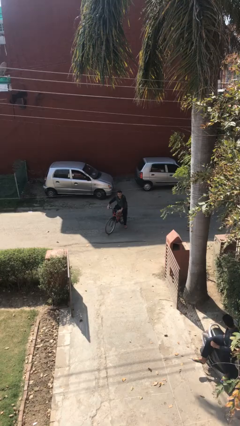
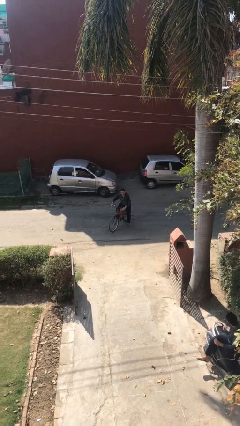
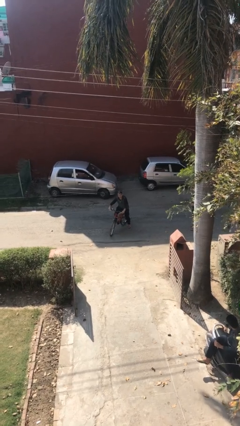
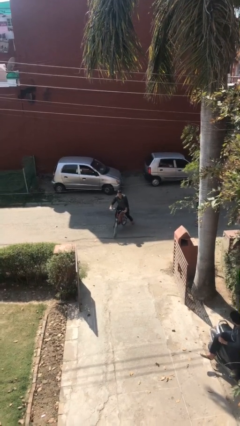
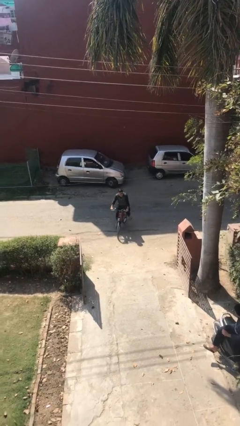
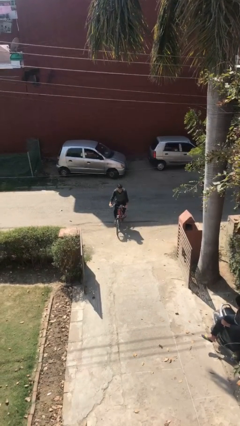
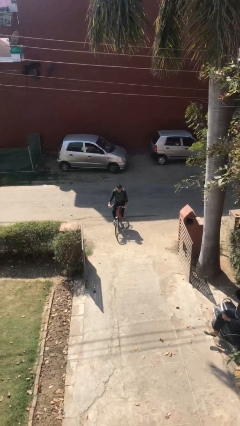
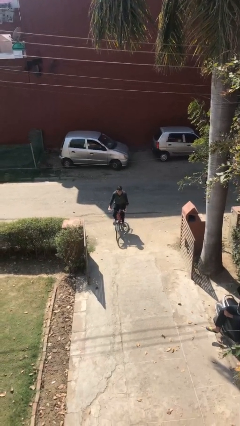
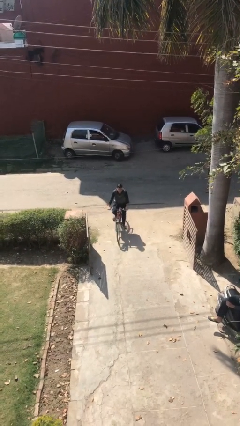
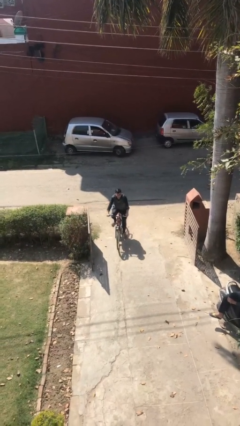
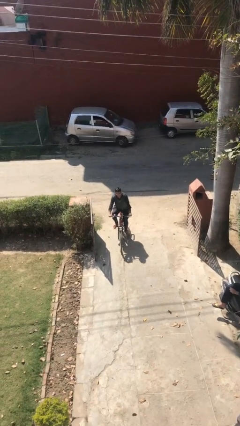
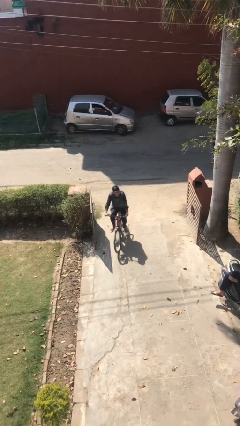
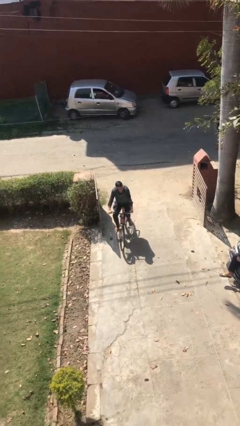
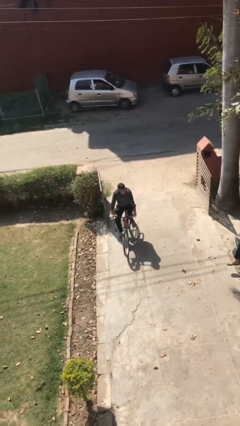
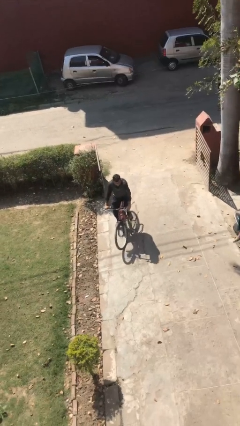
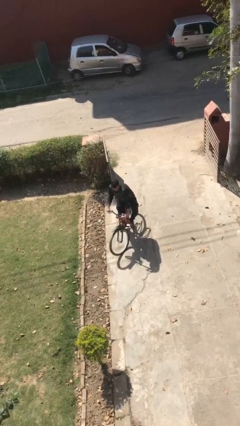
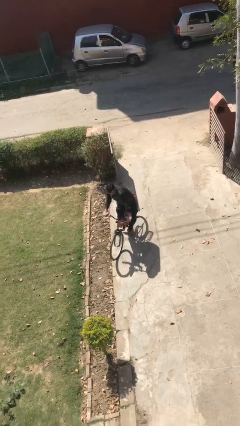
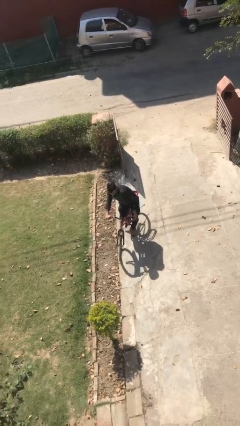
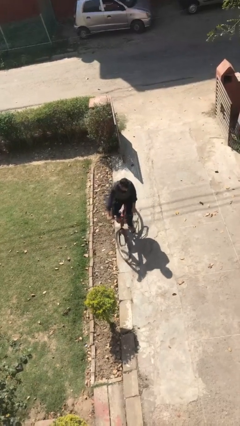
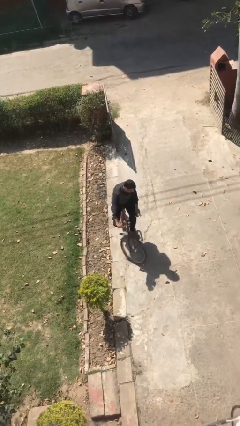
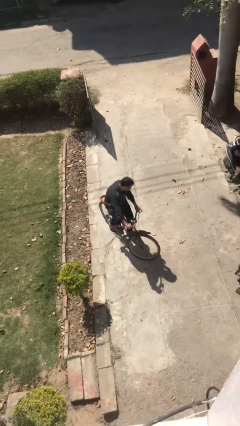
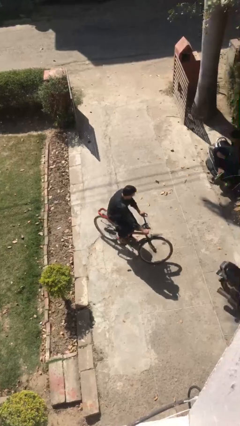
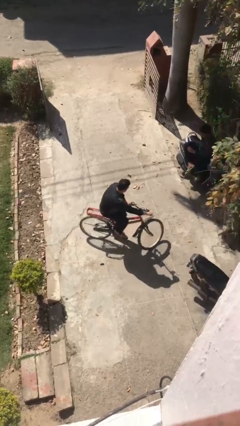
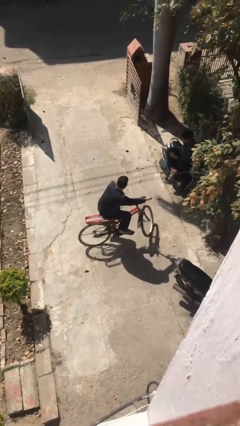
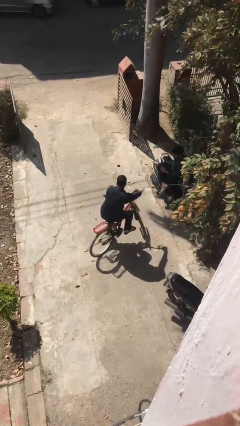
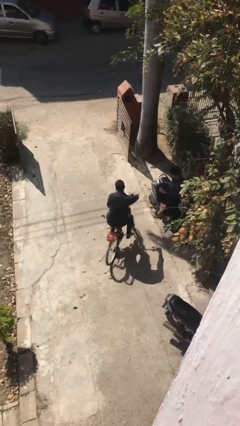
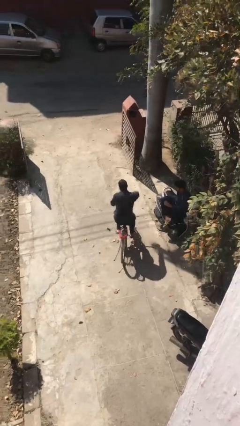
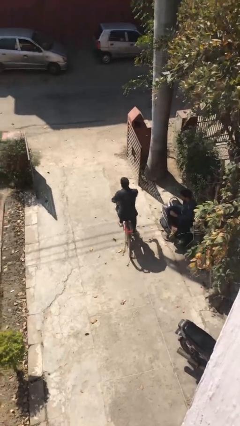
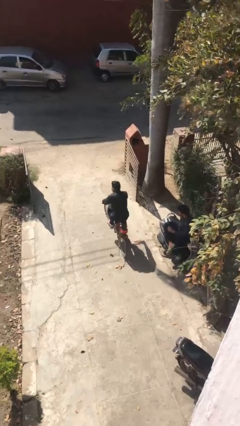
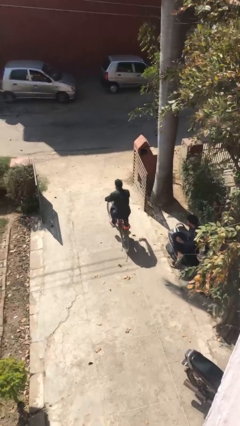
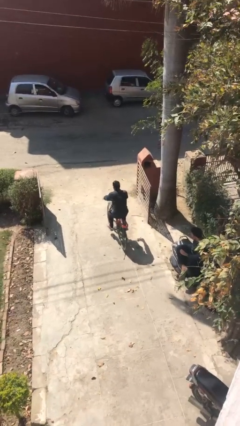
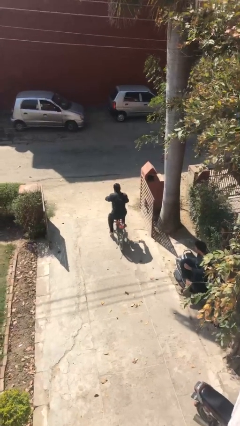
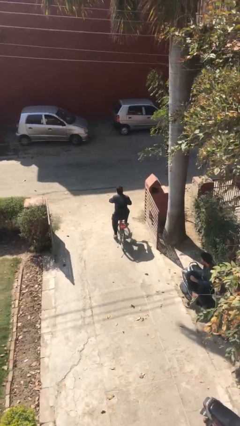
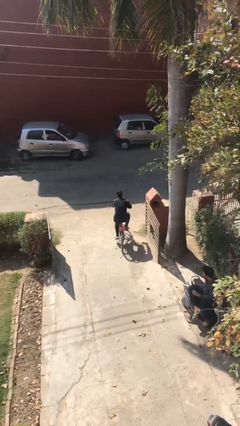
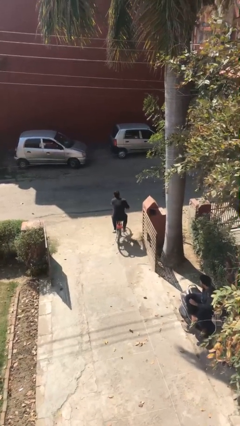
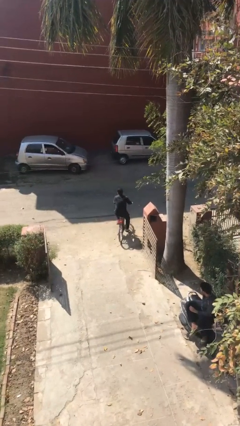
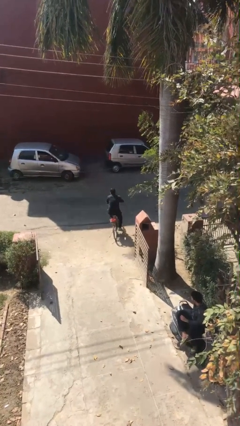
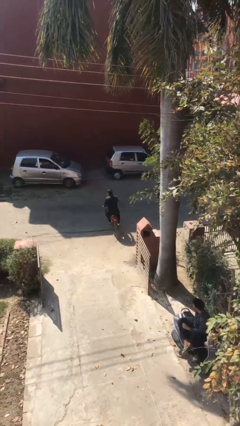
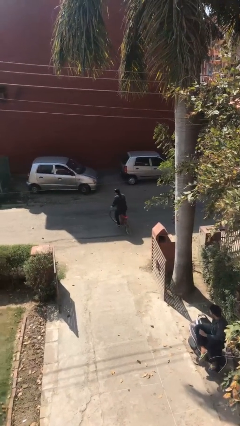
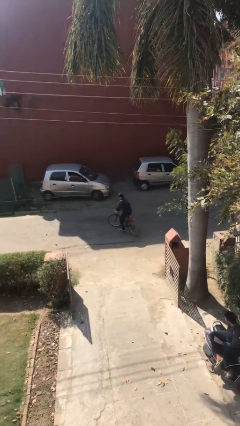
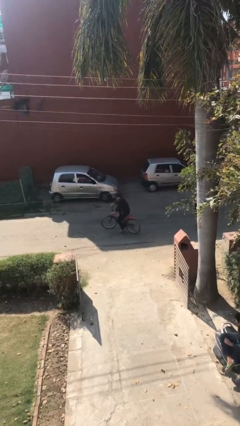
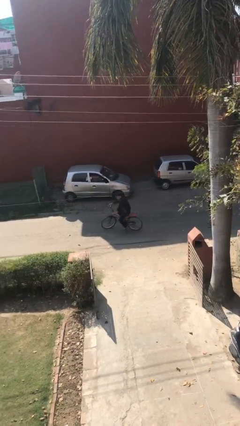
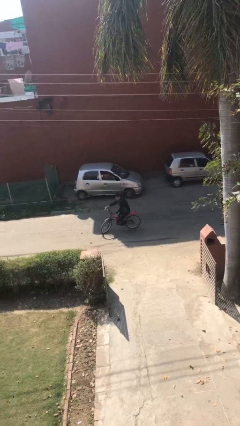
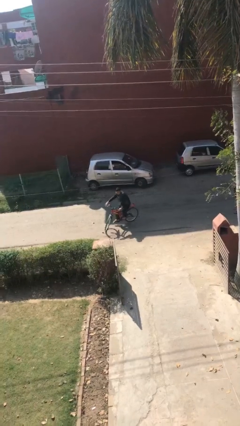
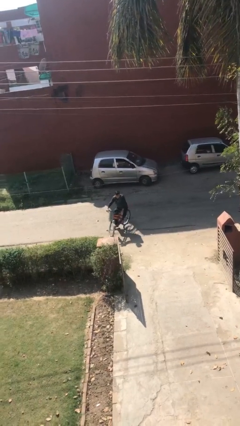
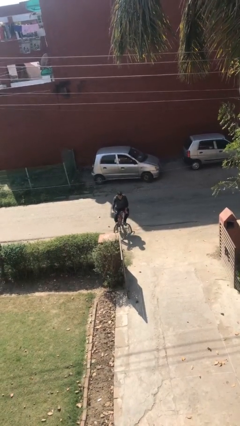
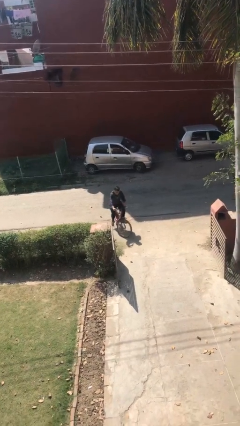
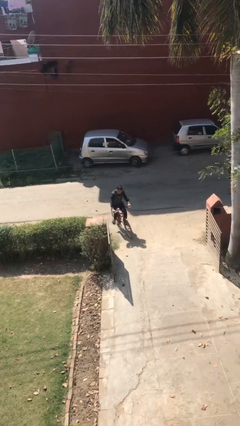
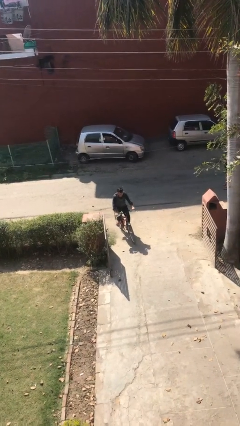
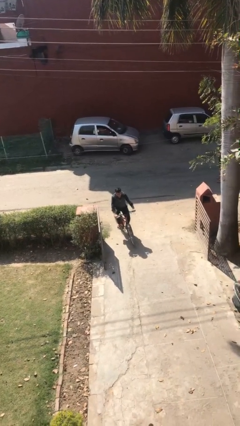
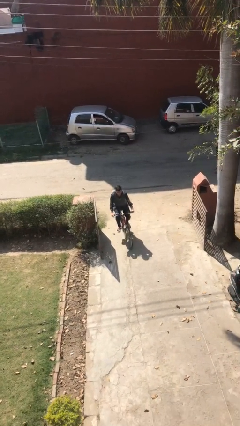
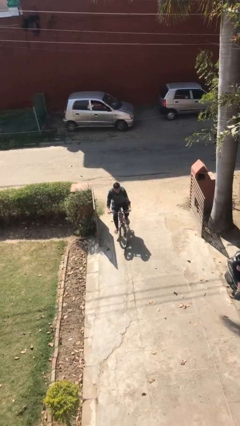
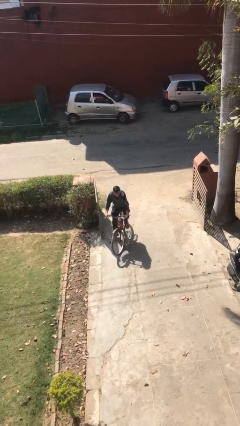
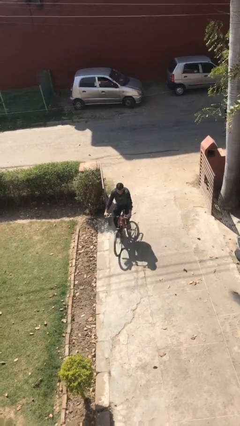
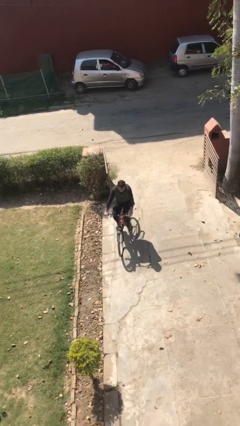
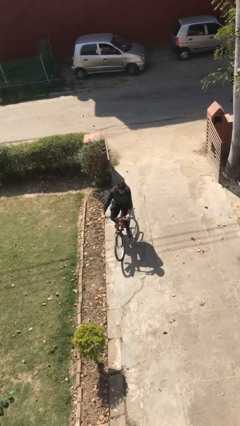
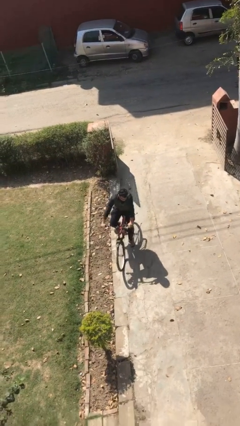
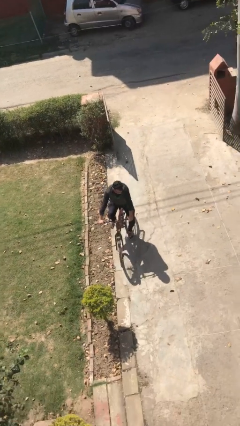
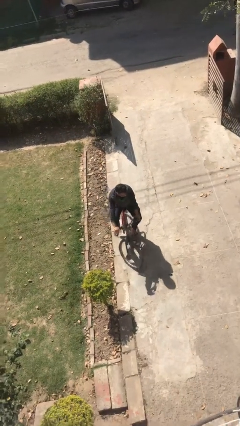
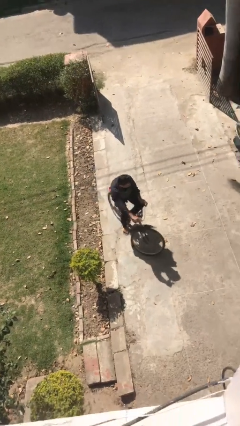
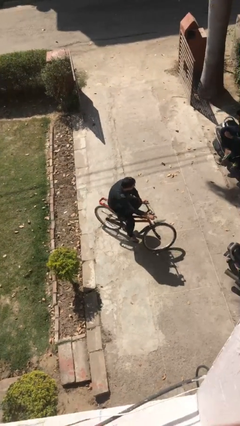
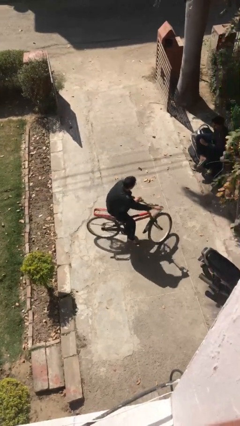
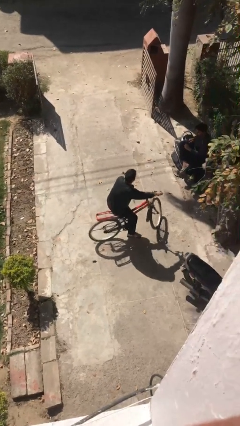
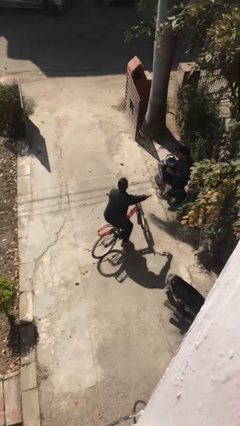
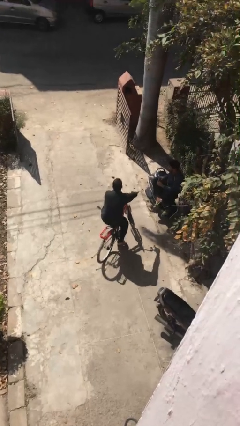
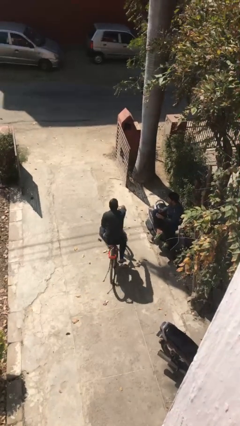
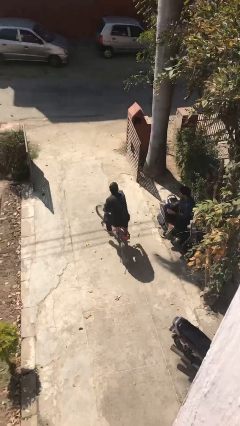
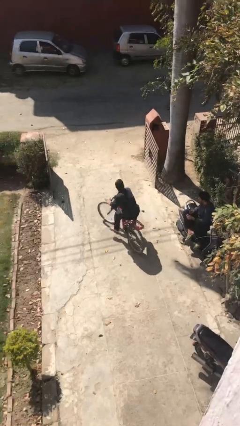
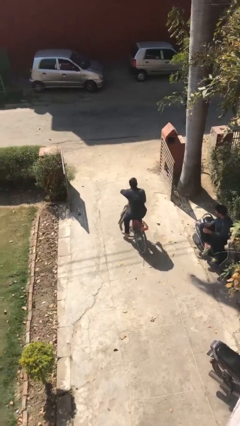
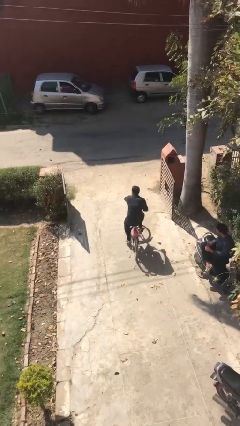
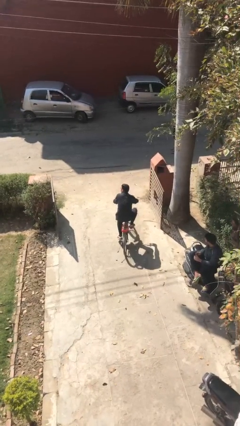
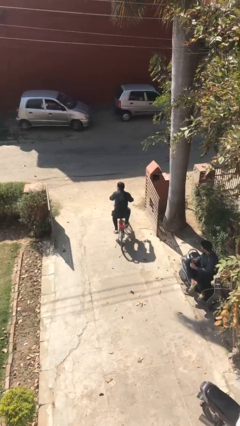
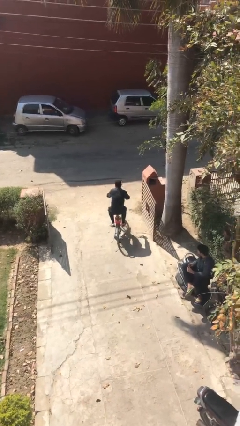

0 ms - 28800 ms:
person rides bicycle

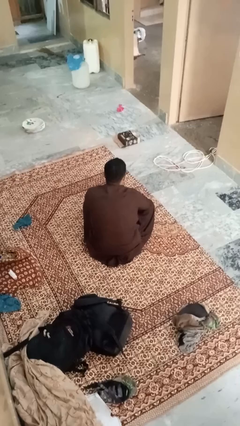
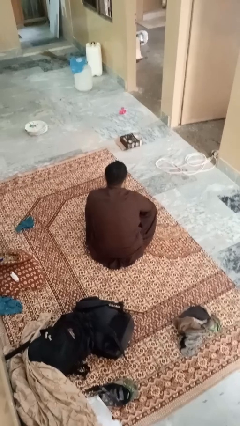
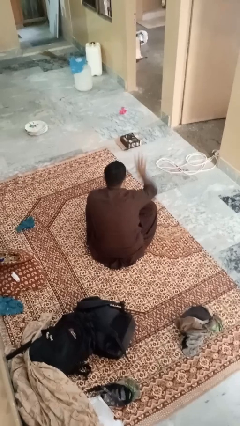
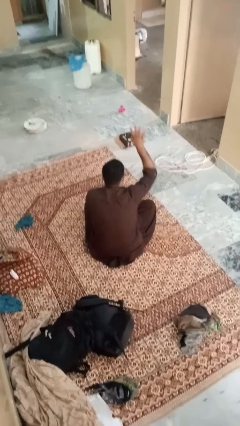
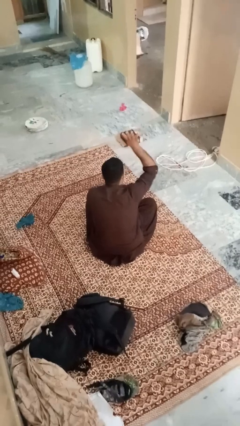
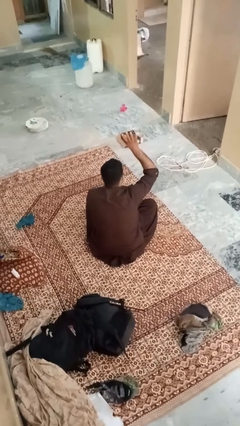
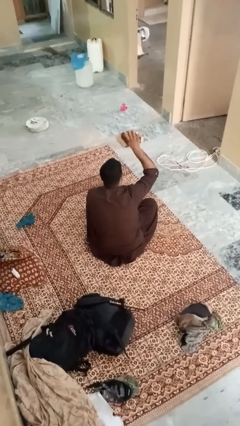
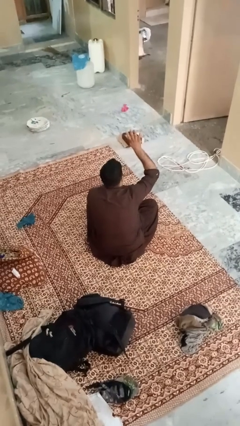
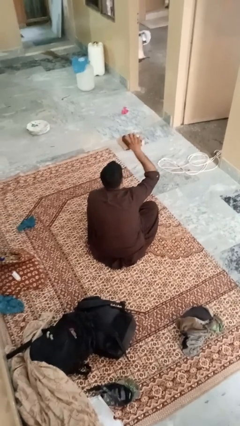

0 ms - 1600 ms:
person gestures number four

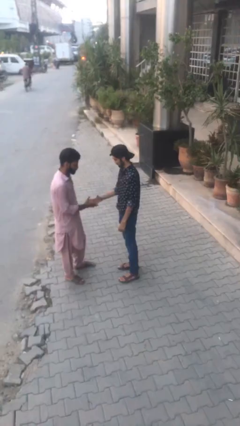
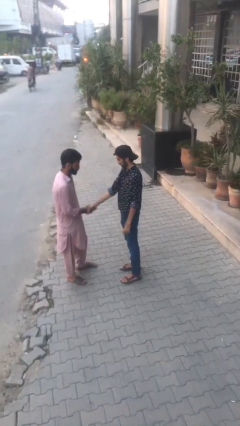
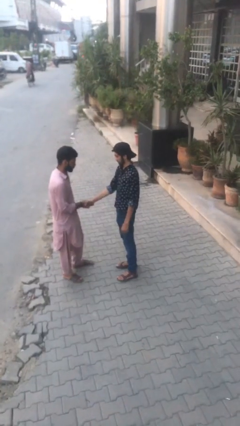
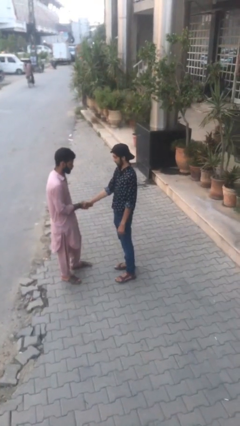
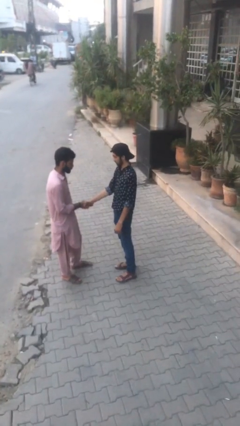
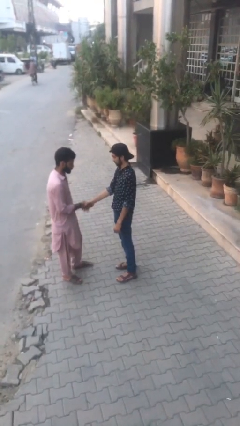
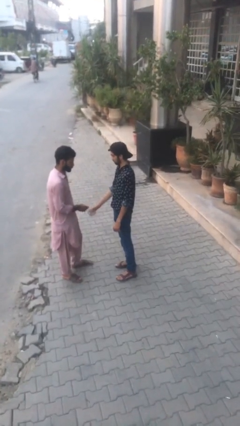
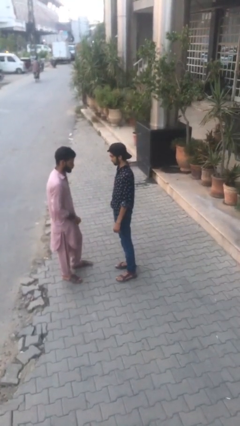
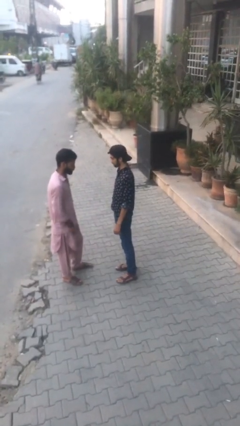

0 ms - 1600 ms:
person shakes hand

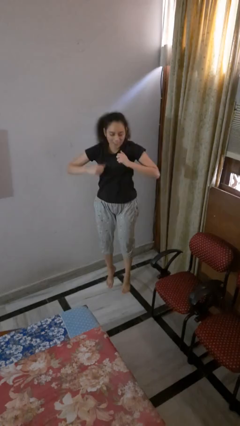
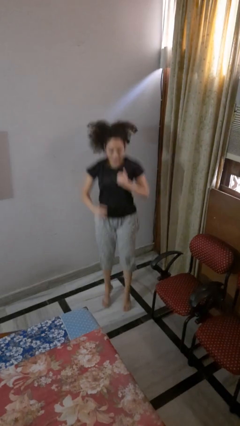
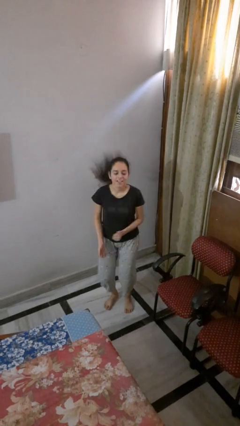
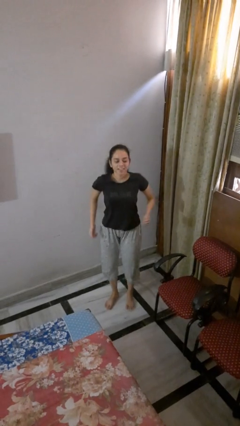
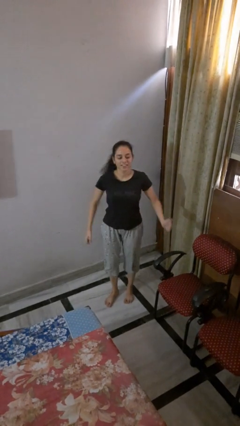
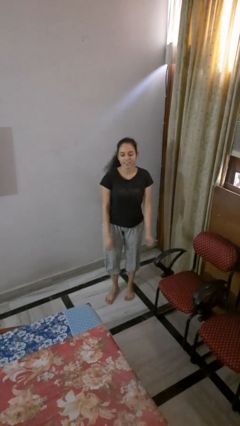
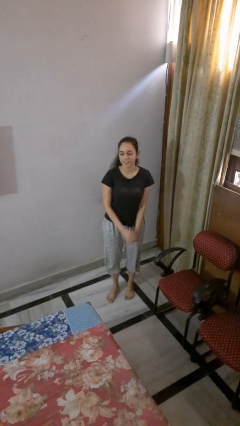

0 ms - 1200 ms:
person jumps
